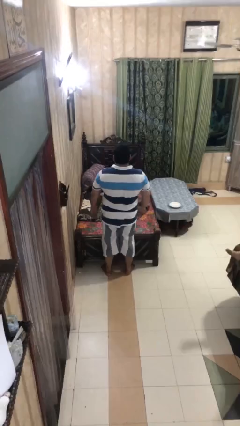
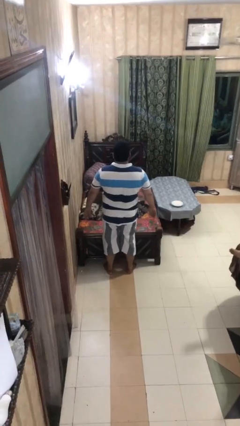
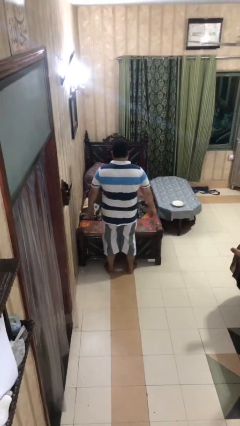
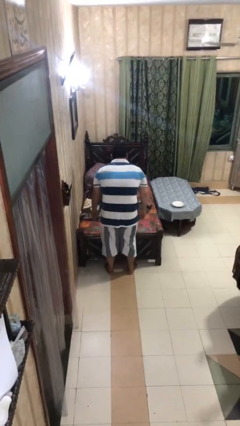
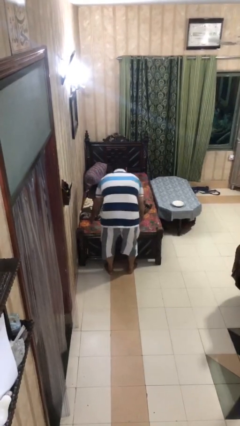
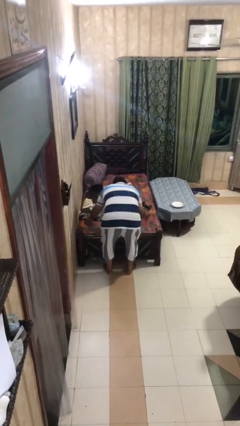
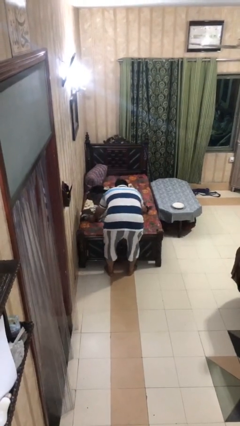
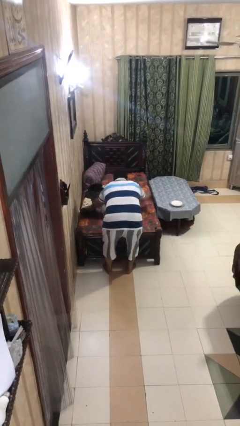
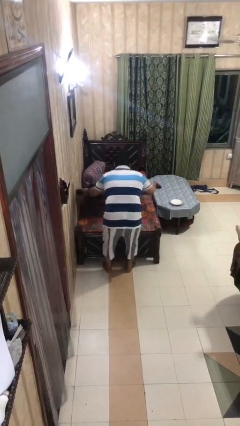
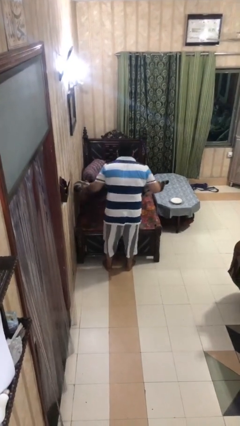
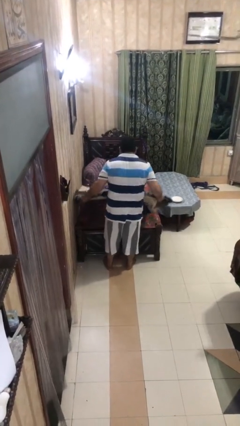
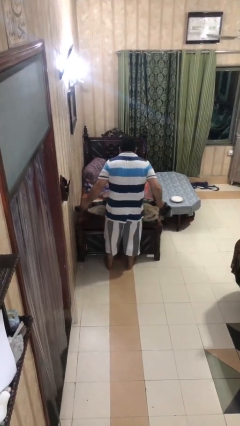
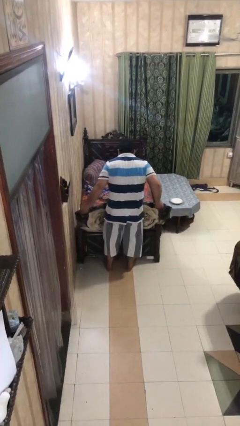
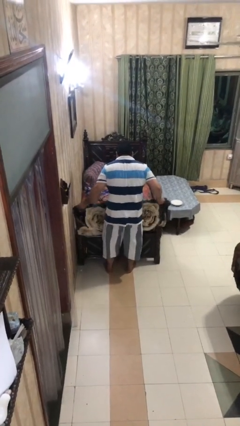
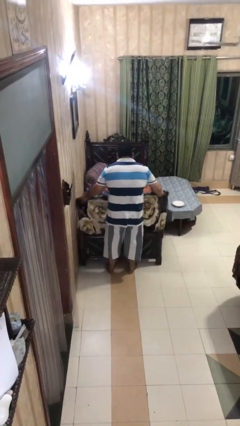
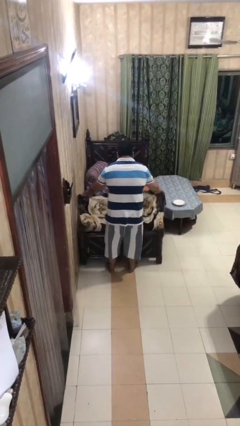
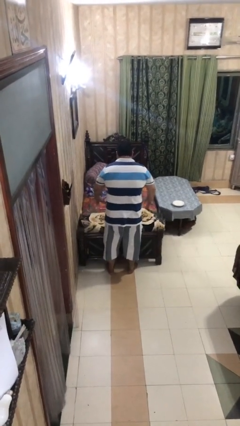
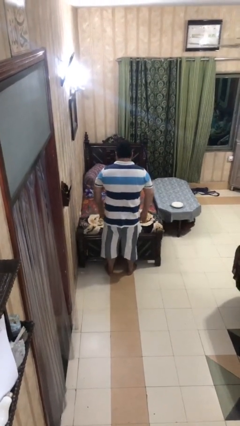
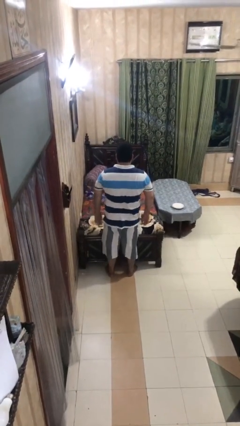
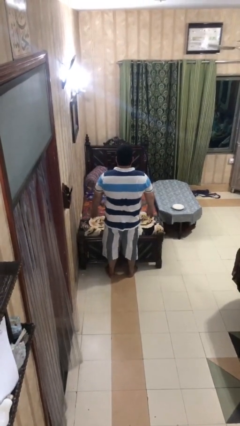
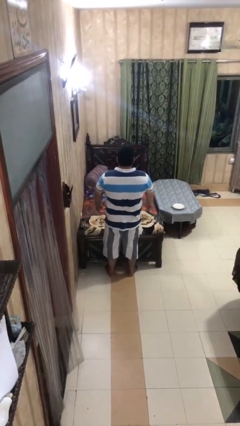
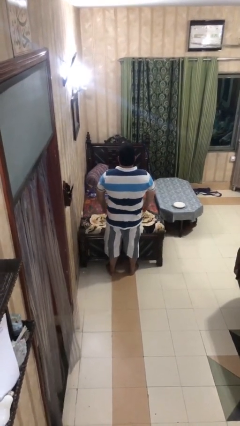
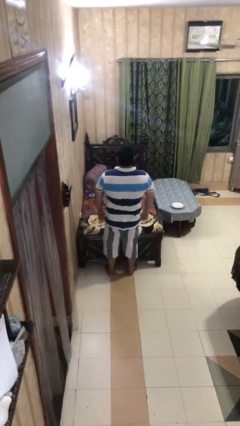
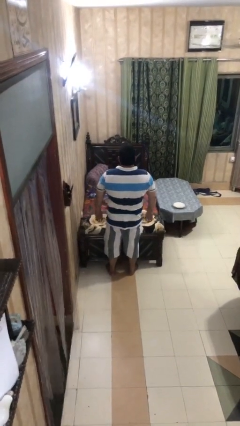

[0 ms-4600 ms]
person folds blanket

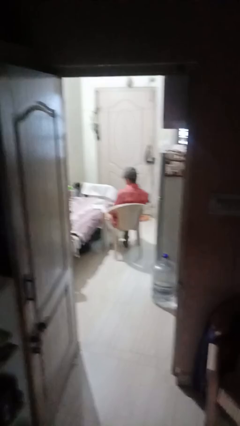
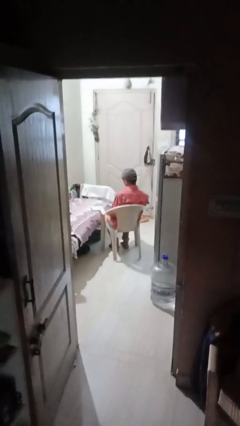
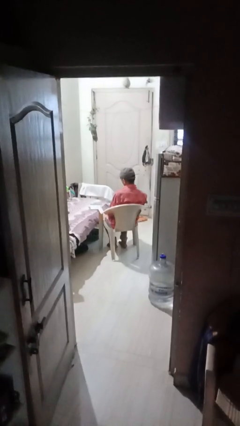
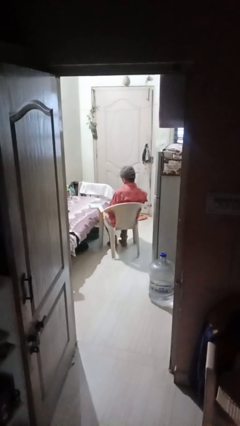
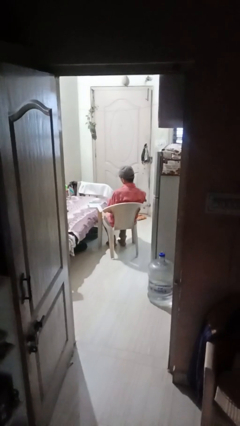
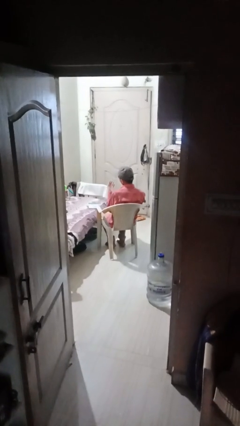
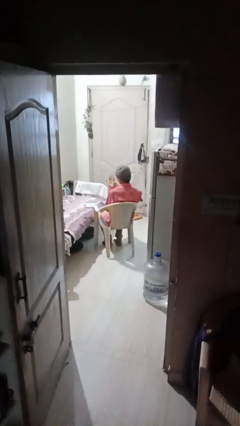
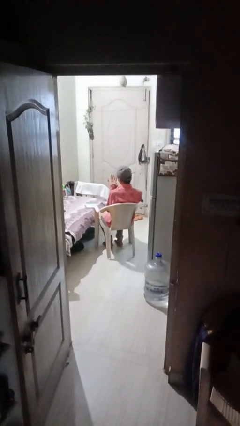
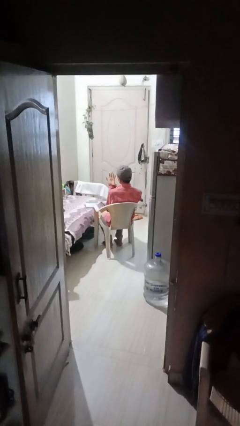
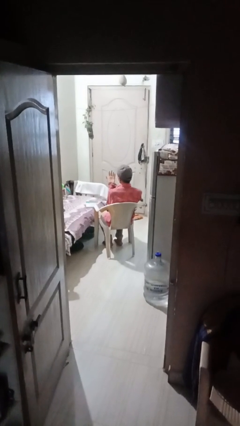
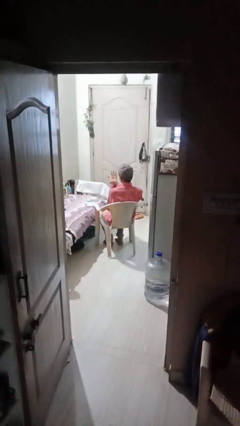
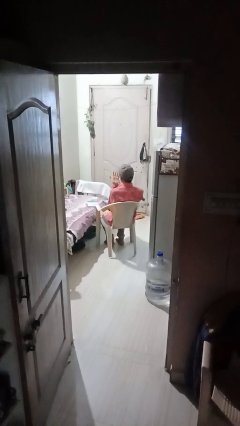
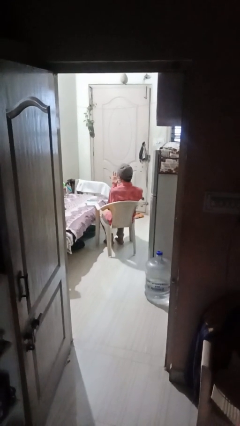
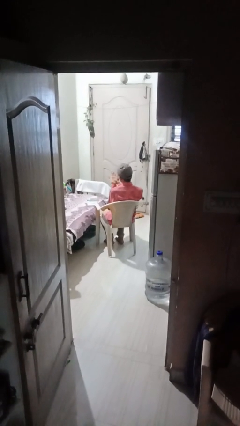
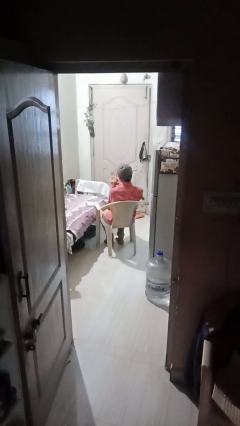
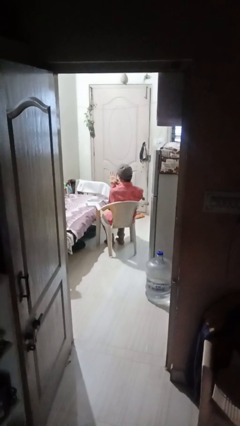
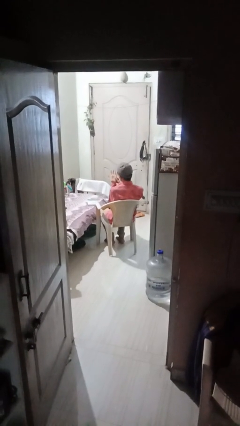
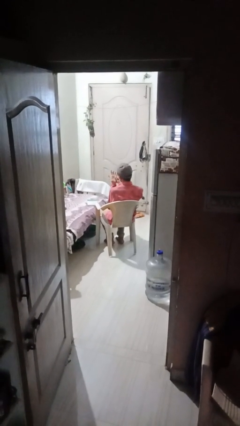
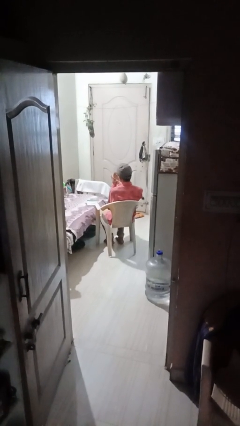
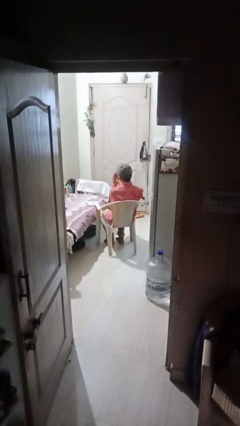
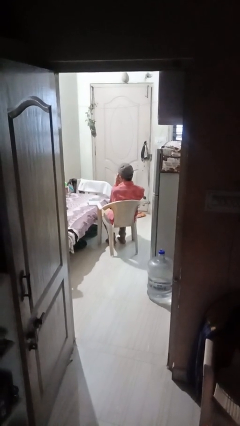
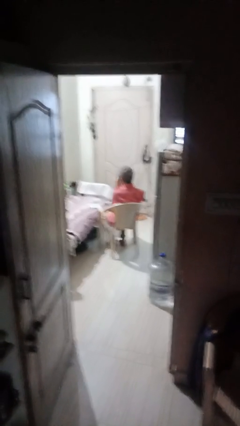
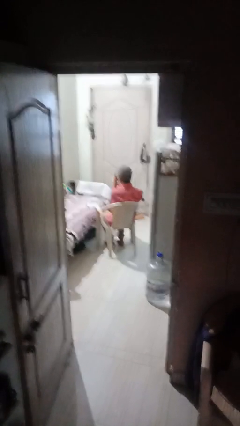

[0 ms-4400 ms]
person looks at hands in lap

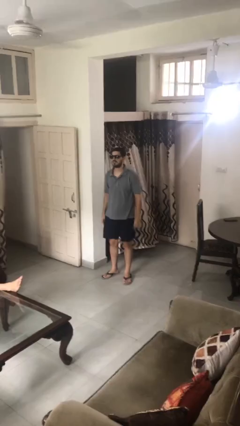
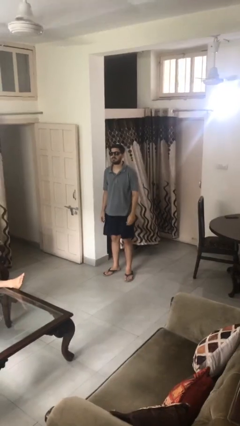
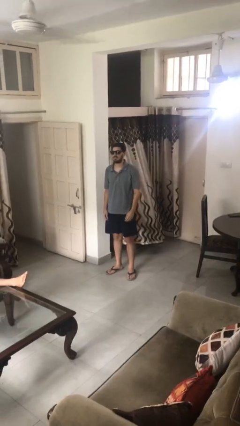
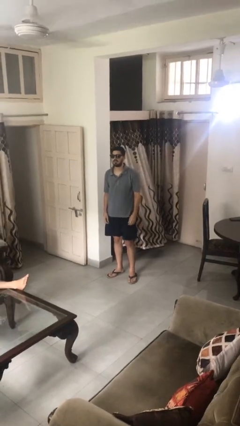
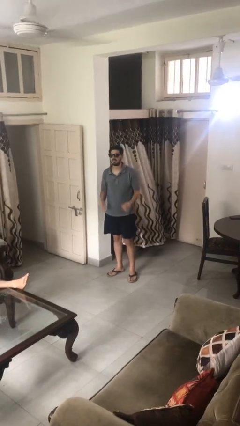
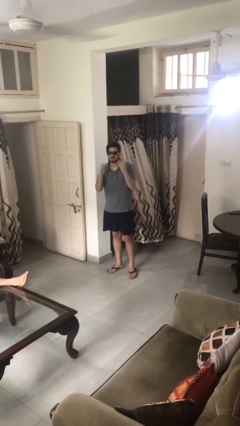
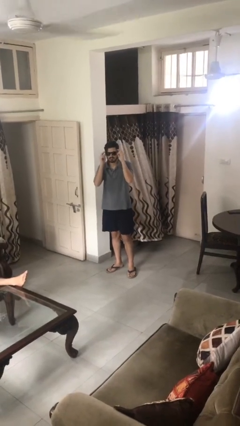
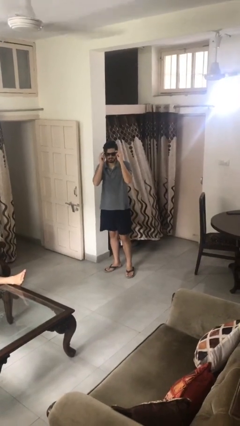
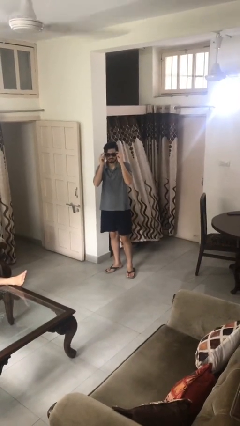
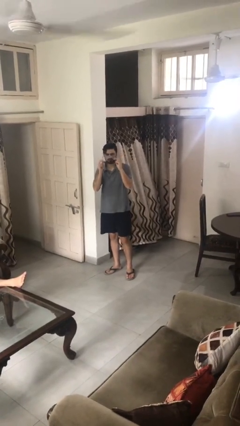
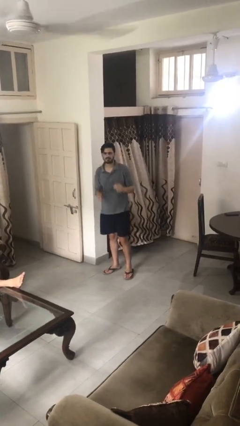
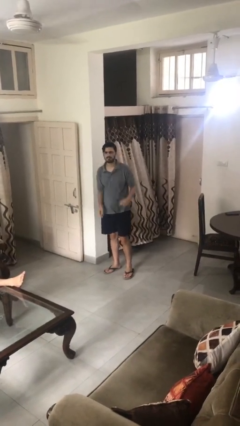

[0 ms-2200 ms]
person takes off sunglasses

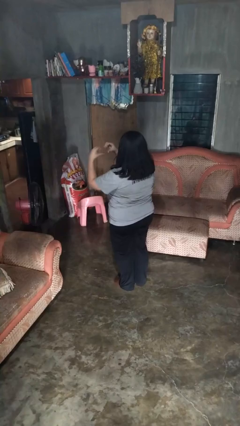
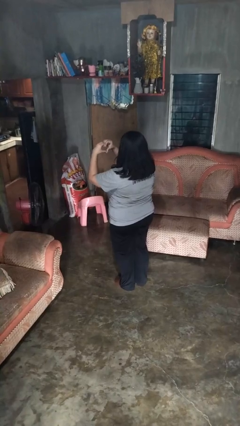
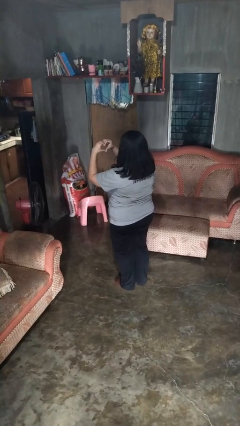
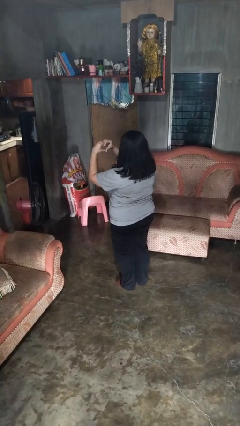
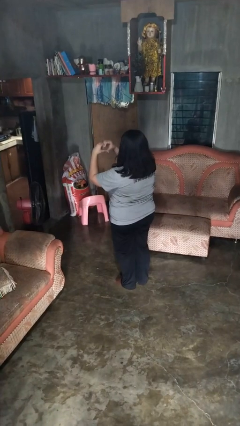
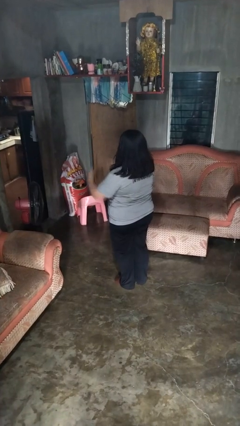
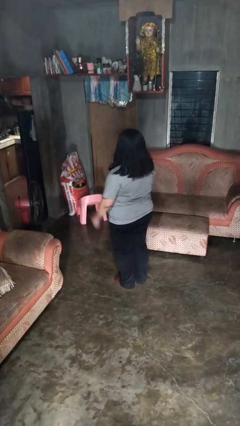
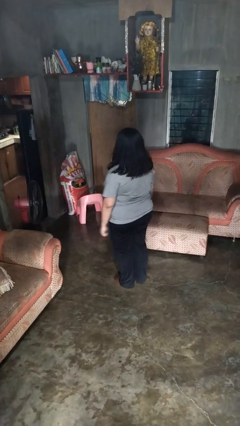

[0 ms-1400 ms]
person gestures heart

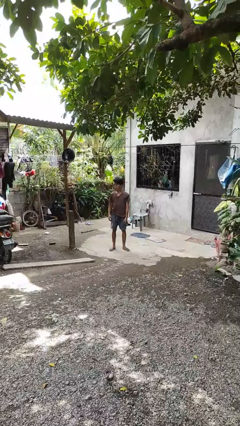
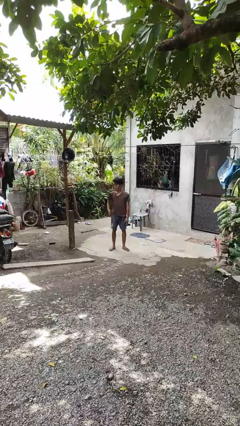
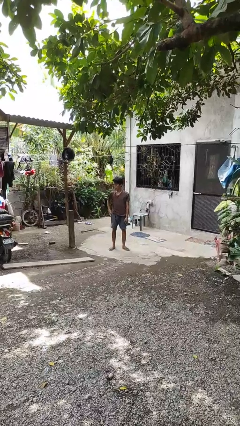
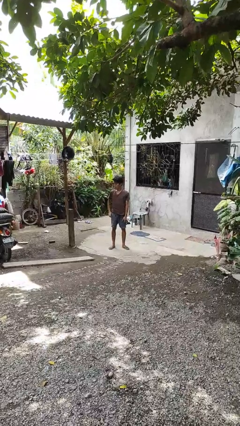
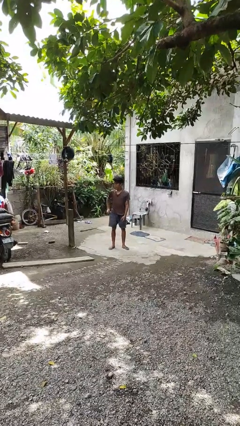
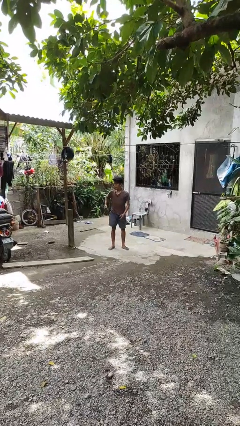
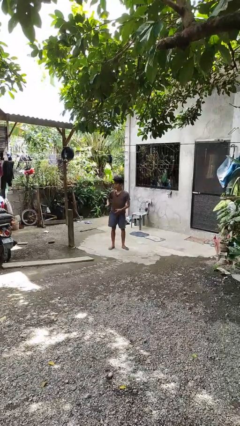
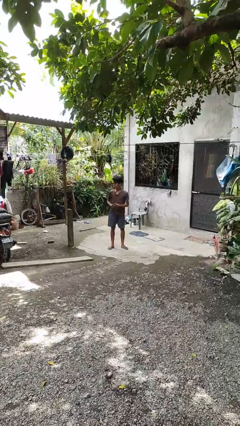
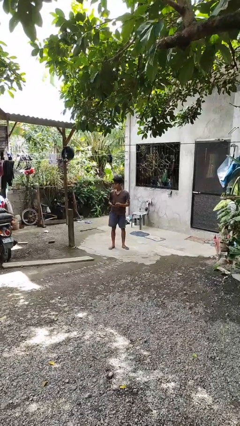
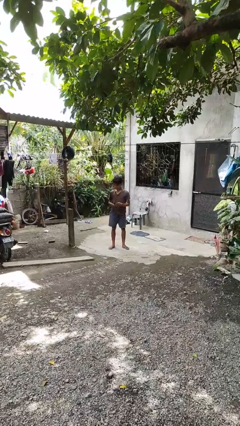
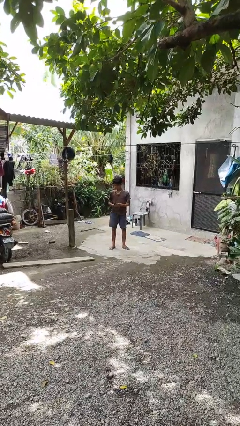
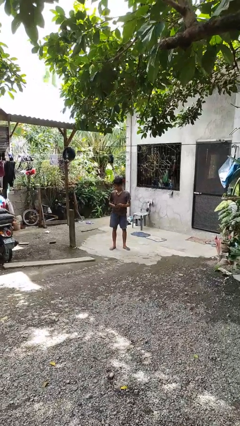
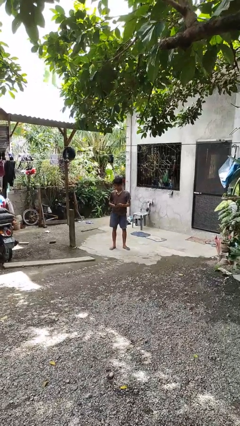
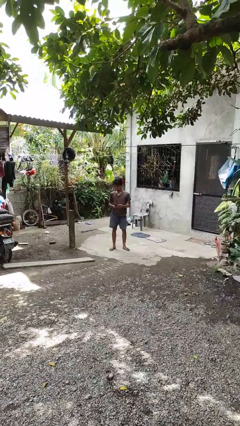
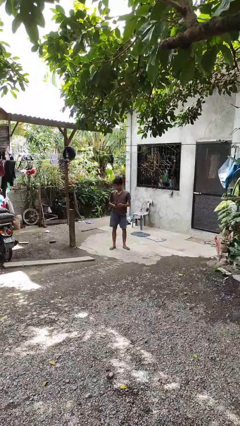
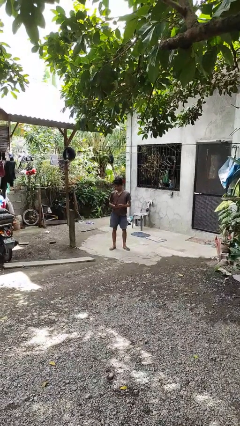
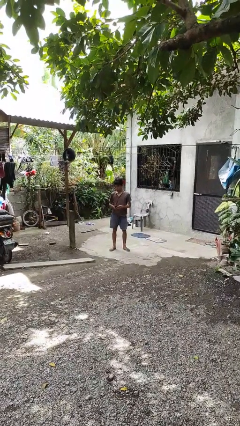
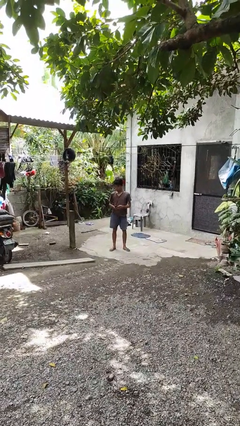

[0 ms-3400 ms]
person takes phone from pocket

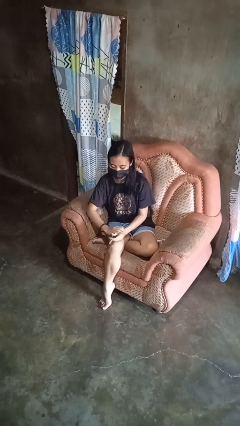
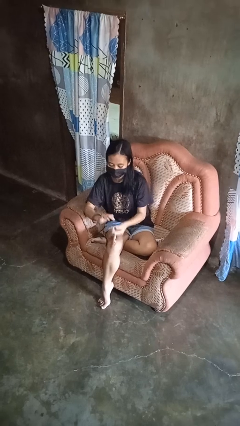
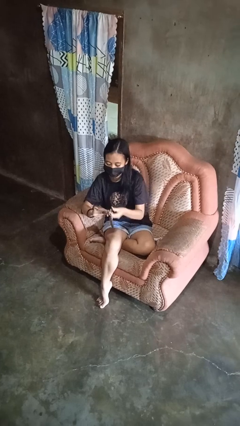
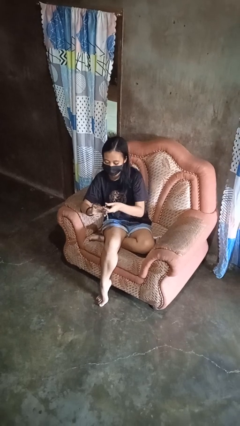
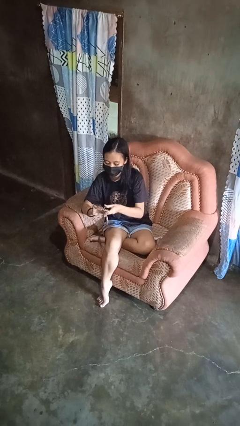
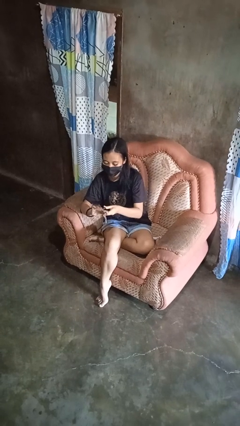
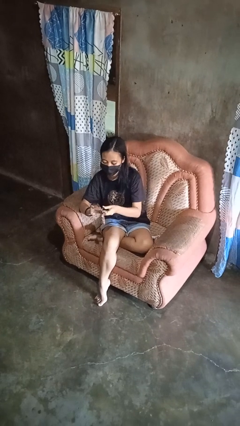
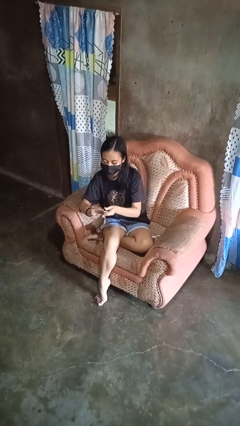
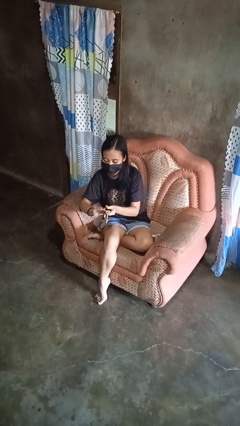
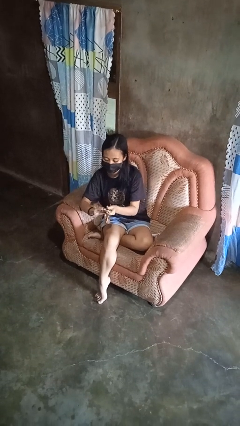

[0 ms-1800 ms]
person clips fingernails
